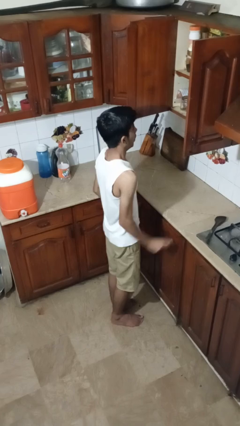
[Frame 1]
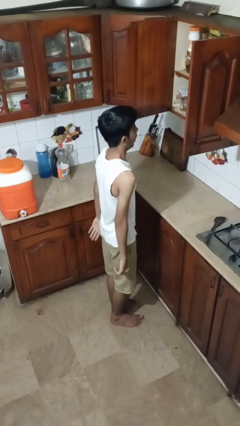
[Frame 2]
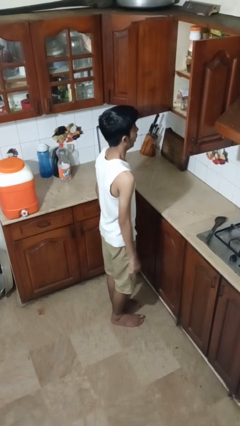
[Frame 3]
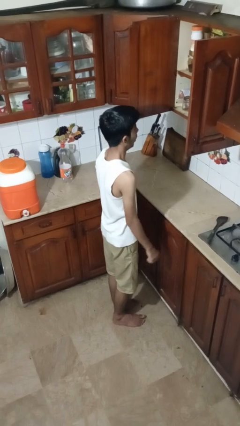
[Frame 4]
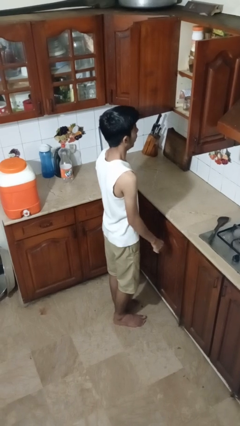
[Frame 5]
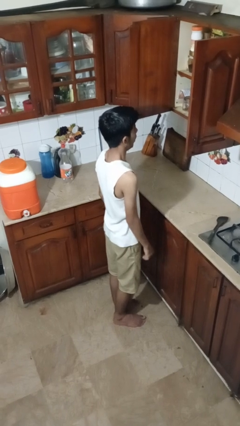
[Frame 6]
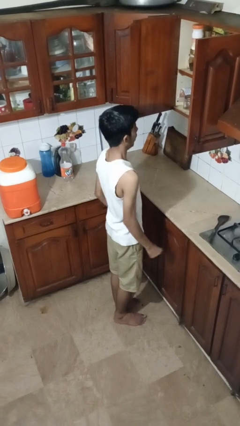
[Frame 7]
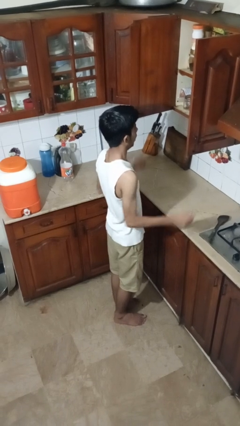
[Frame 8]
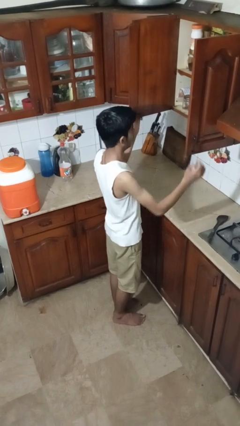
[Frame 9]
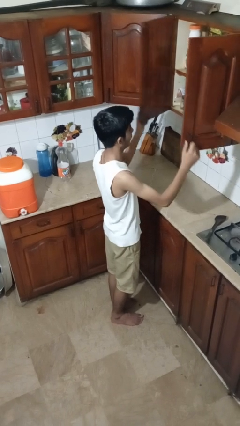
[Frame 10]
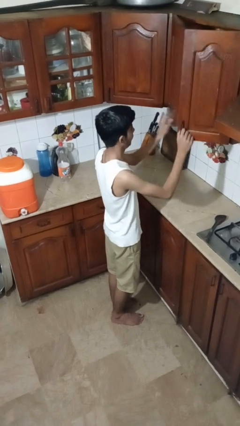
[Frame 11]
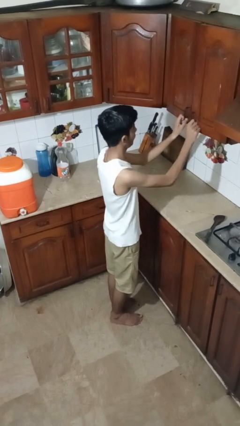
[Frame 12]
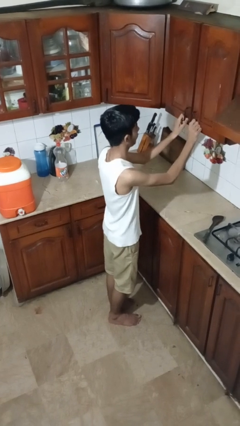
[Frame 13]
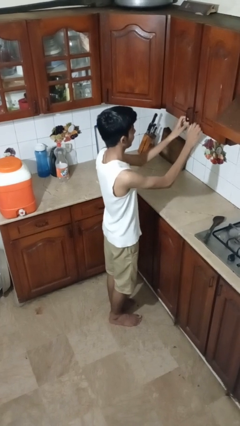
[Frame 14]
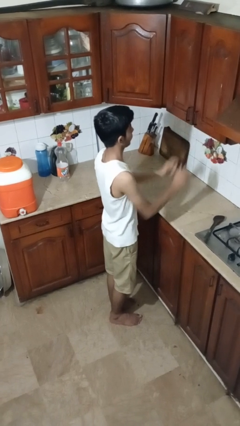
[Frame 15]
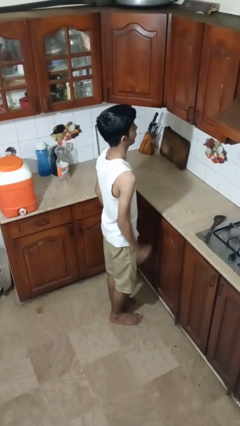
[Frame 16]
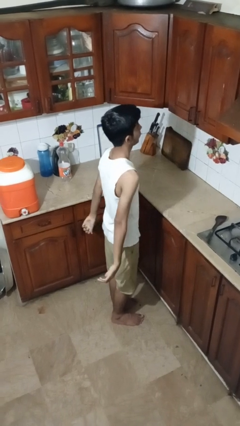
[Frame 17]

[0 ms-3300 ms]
person closes cabinet

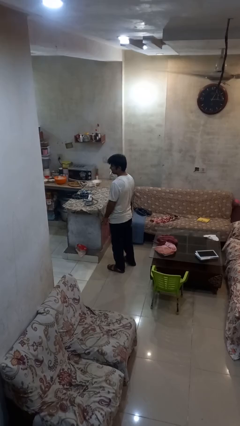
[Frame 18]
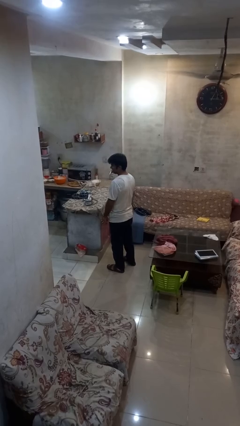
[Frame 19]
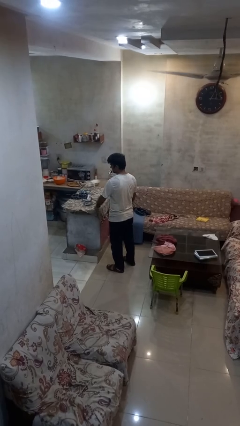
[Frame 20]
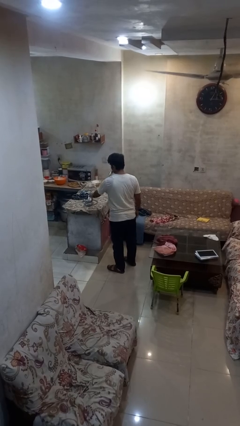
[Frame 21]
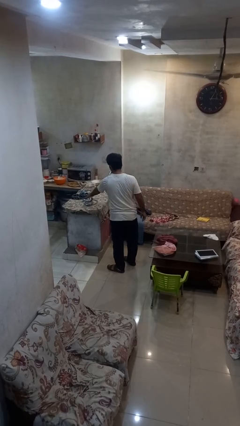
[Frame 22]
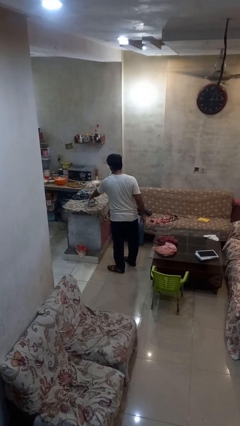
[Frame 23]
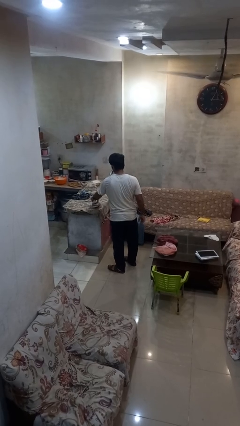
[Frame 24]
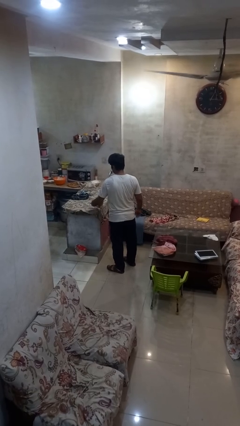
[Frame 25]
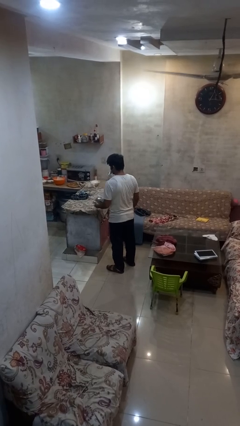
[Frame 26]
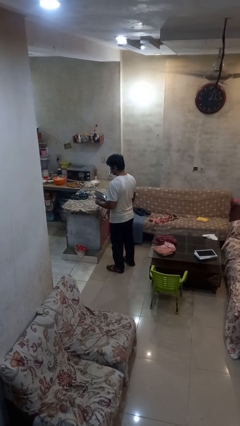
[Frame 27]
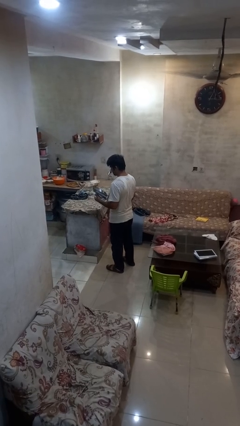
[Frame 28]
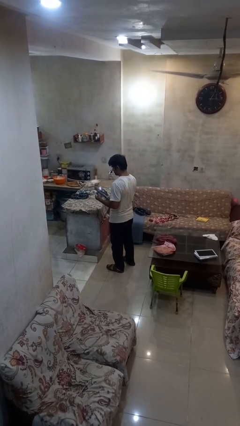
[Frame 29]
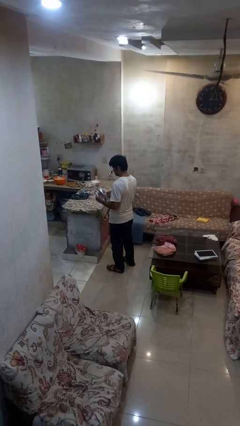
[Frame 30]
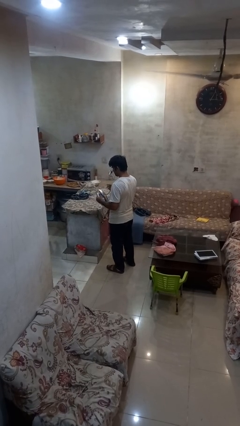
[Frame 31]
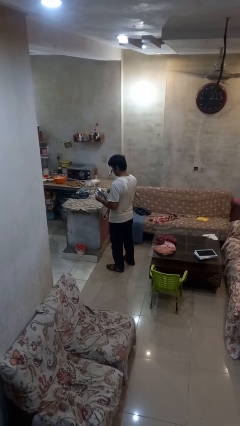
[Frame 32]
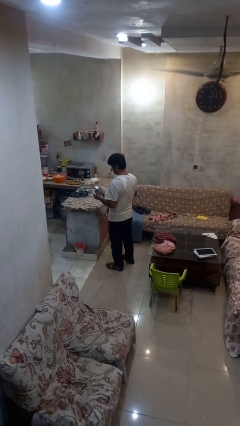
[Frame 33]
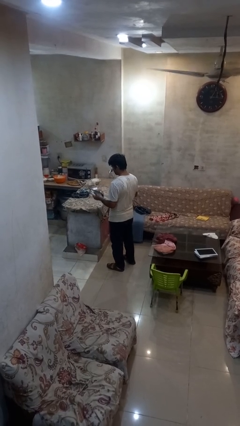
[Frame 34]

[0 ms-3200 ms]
person picks up object from countertop

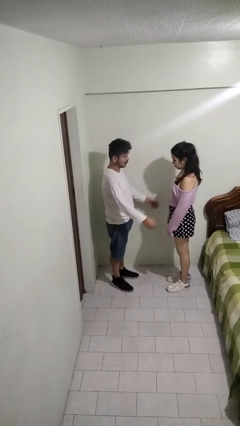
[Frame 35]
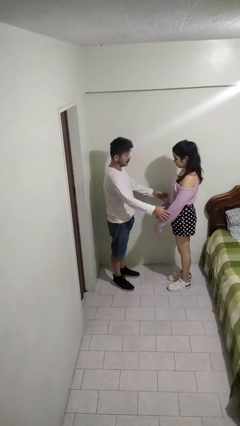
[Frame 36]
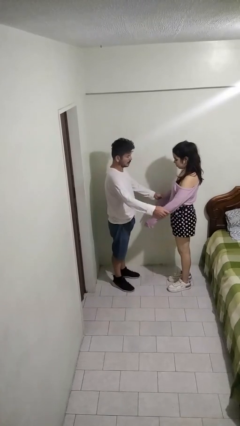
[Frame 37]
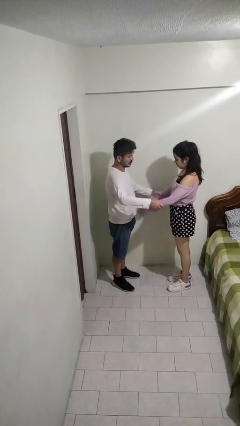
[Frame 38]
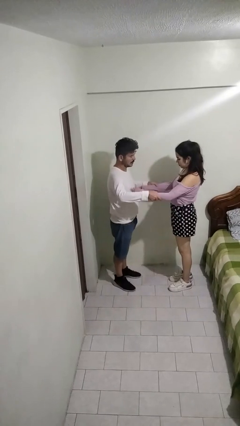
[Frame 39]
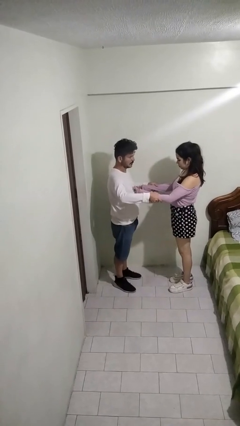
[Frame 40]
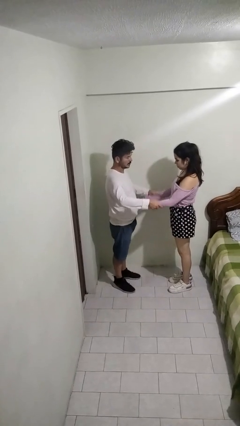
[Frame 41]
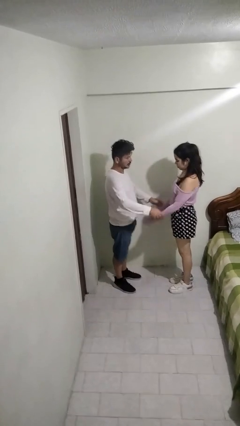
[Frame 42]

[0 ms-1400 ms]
person grabs person by forearm

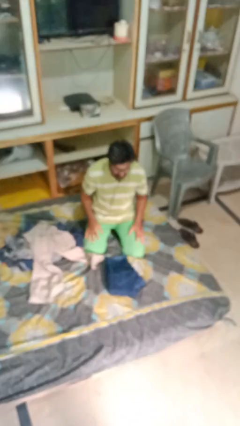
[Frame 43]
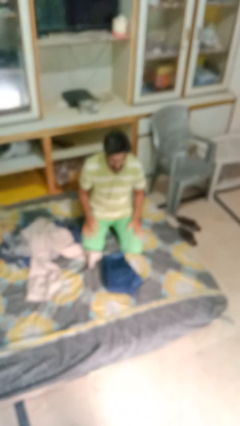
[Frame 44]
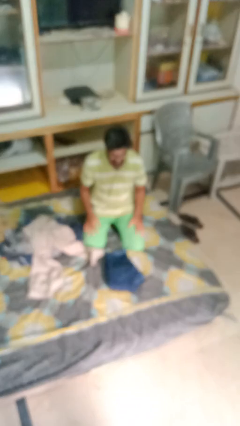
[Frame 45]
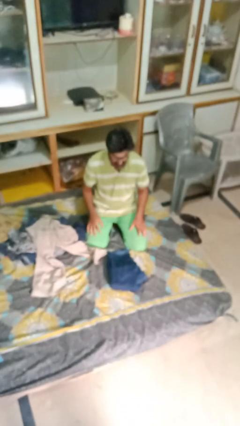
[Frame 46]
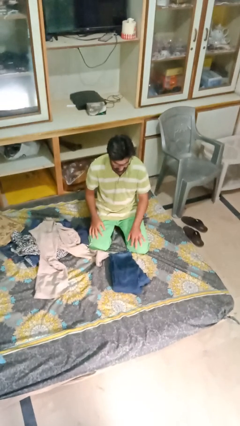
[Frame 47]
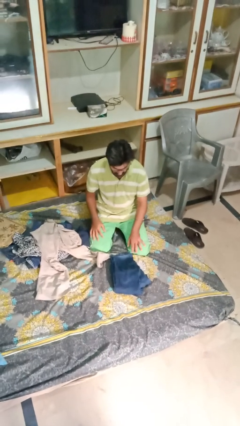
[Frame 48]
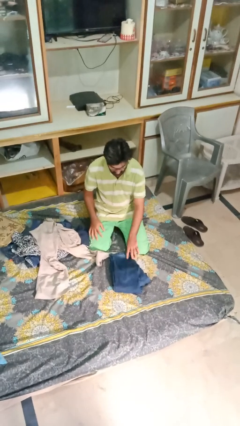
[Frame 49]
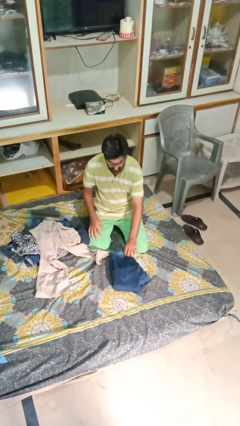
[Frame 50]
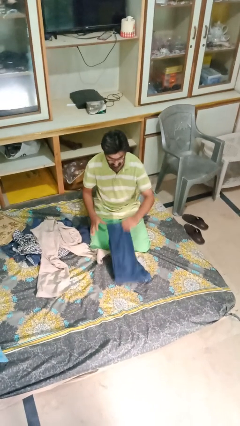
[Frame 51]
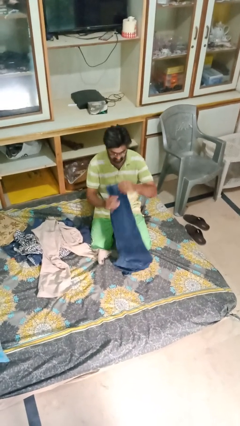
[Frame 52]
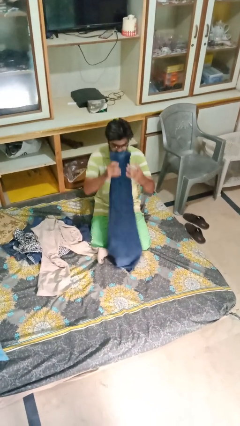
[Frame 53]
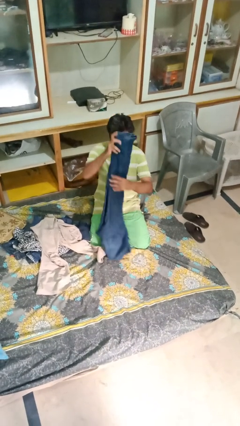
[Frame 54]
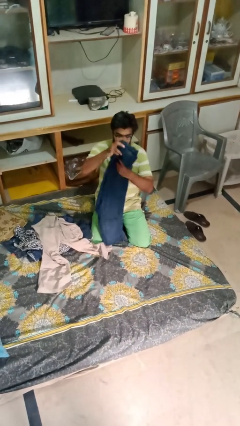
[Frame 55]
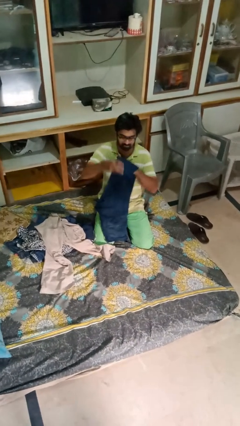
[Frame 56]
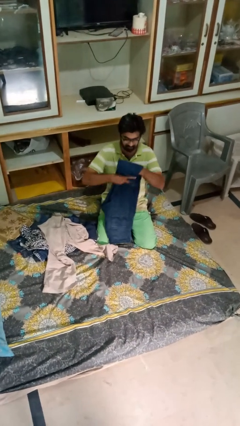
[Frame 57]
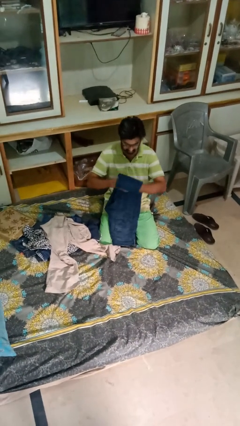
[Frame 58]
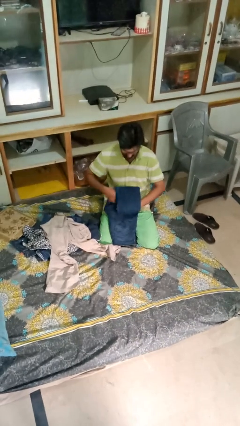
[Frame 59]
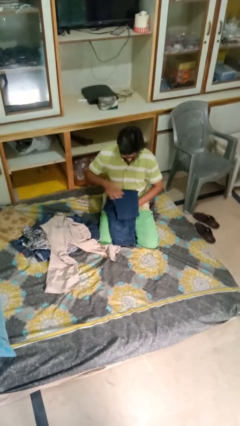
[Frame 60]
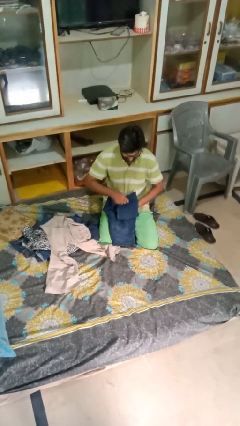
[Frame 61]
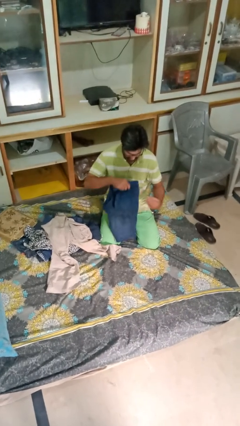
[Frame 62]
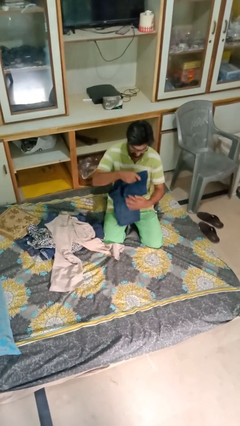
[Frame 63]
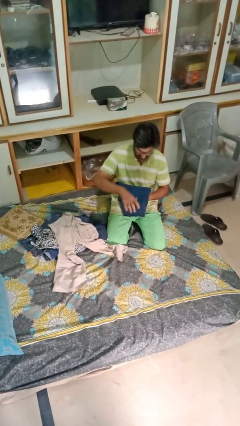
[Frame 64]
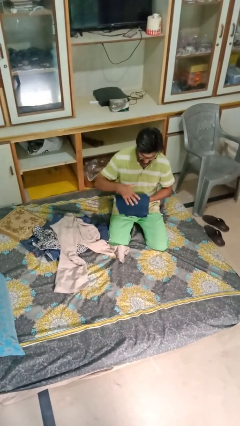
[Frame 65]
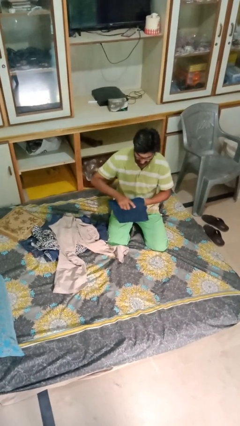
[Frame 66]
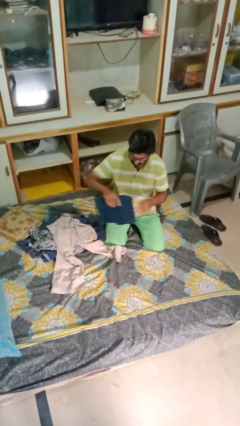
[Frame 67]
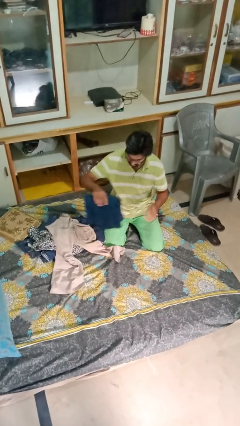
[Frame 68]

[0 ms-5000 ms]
person folds pants

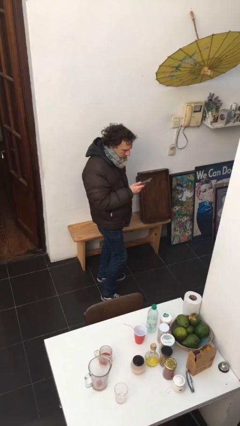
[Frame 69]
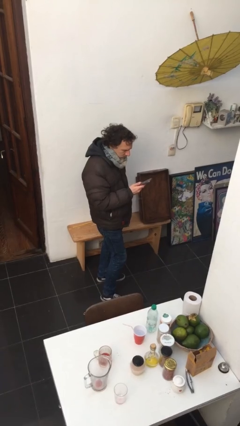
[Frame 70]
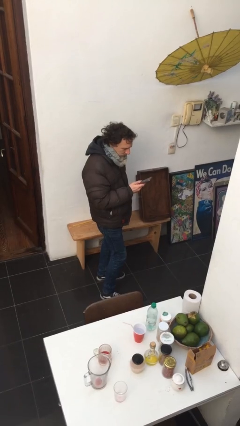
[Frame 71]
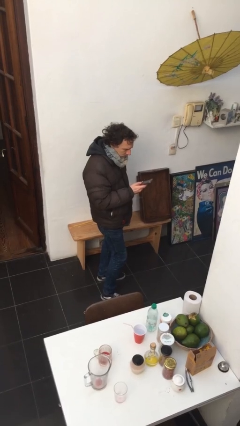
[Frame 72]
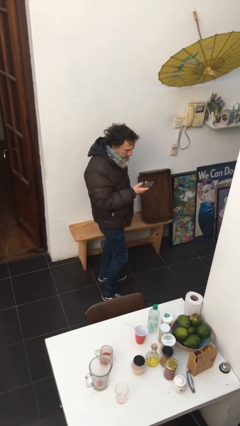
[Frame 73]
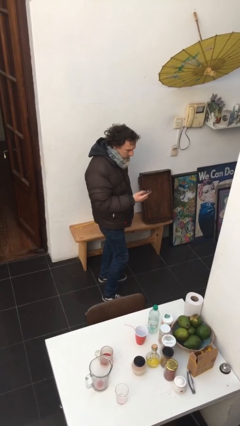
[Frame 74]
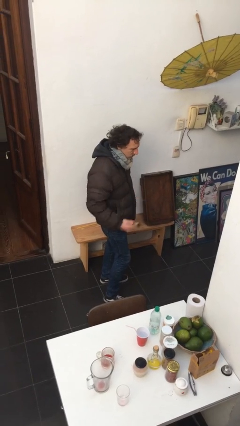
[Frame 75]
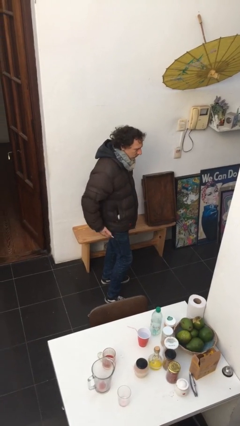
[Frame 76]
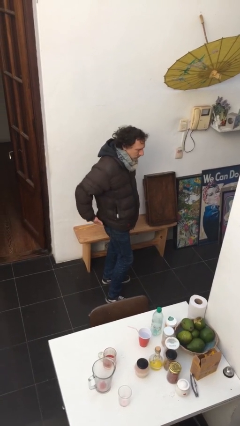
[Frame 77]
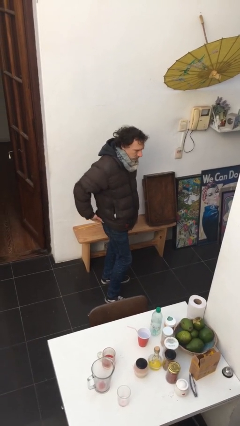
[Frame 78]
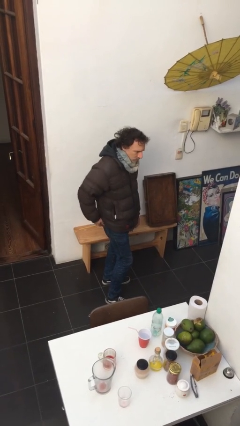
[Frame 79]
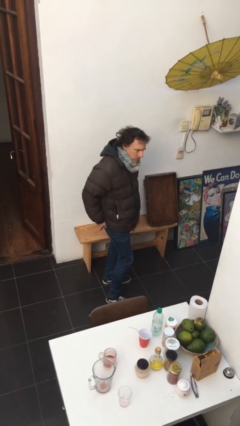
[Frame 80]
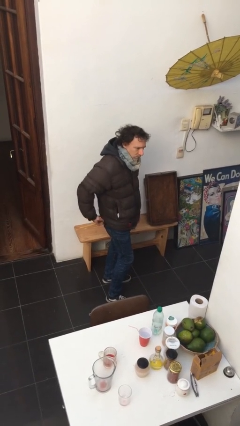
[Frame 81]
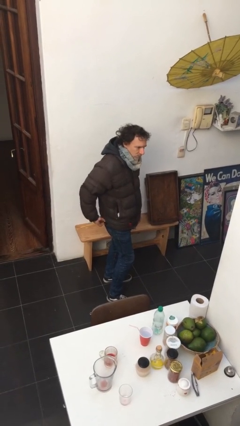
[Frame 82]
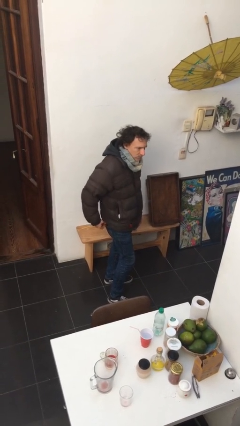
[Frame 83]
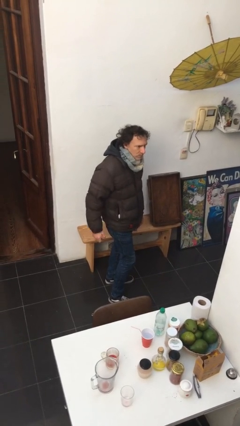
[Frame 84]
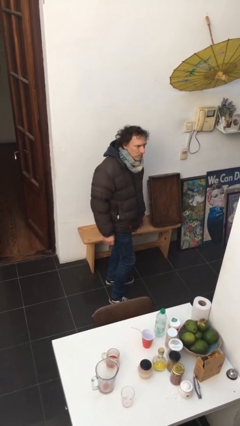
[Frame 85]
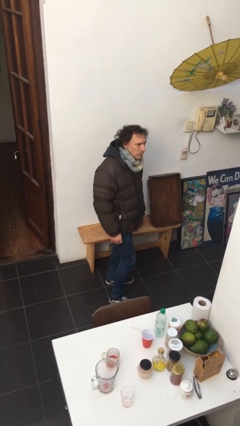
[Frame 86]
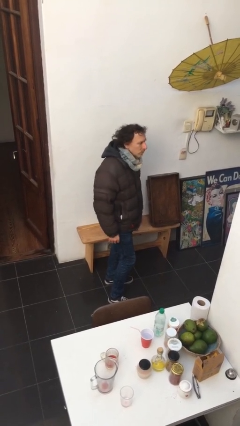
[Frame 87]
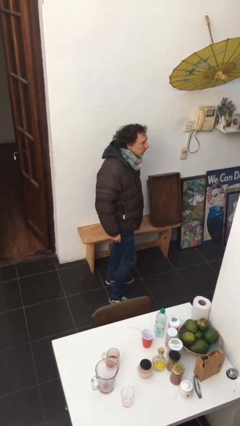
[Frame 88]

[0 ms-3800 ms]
person puts phone into pocket

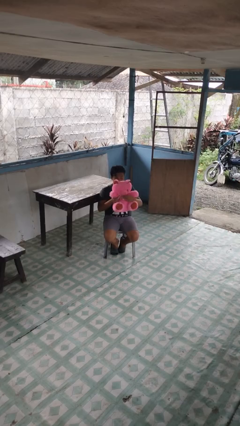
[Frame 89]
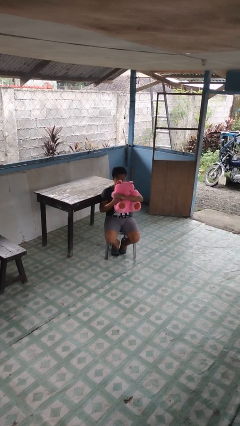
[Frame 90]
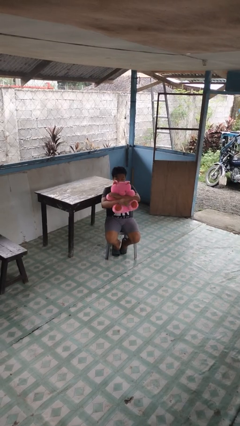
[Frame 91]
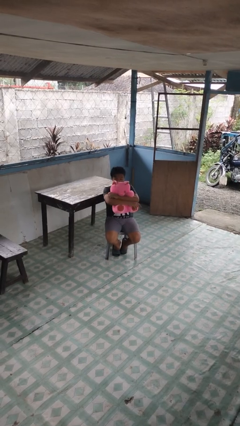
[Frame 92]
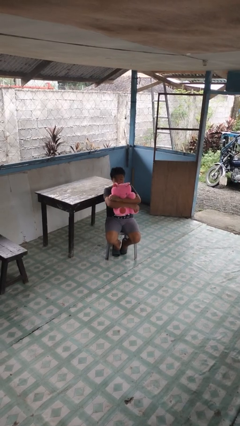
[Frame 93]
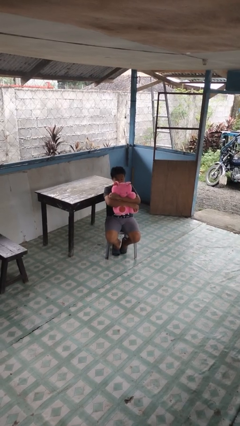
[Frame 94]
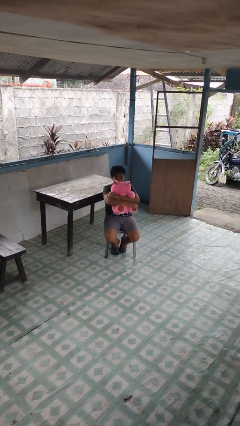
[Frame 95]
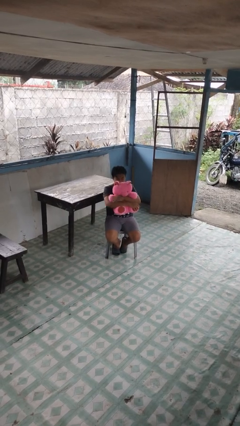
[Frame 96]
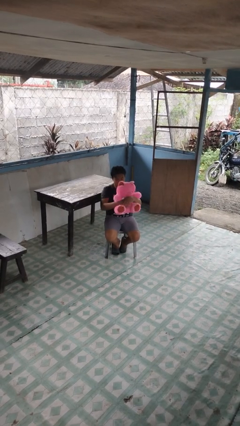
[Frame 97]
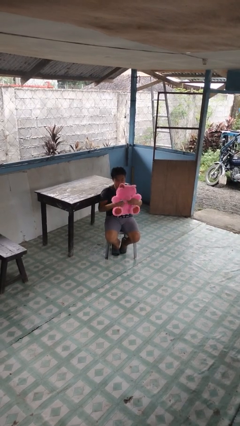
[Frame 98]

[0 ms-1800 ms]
person hugs stuffed animal
